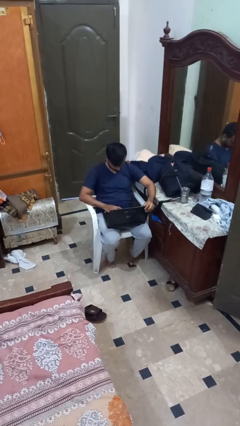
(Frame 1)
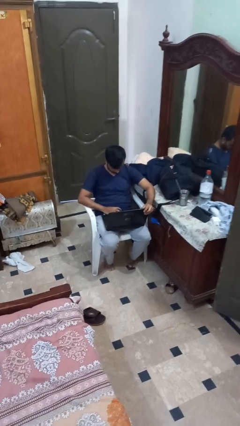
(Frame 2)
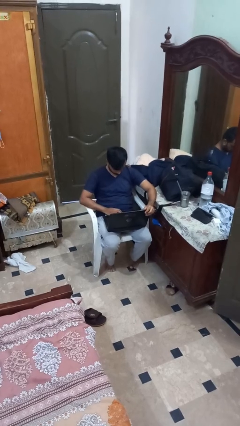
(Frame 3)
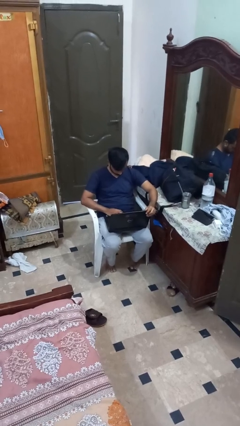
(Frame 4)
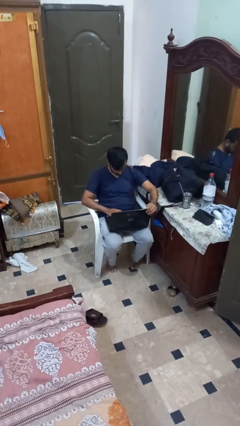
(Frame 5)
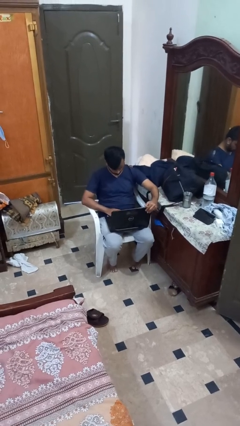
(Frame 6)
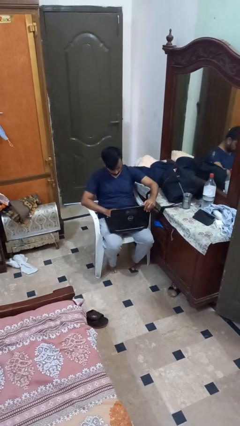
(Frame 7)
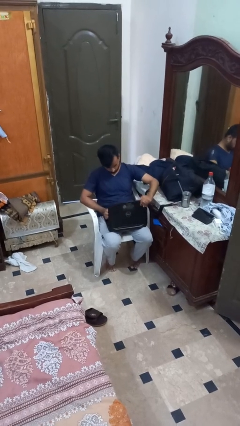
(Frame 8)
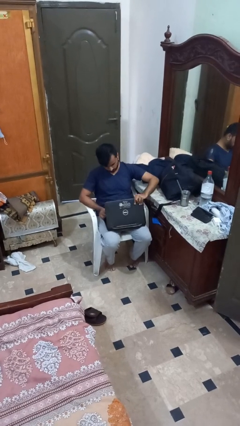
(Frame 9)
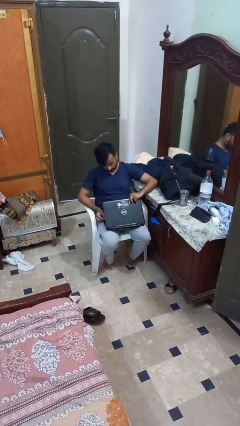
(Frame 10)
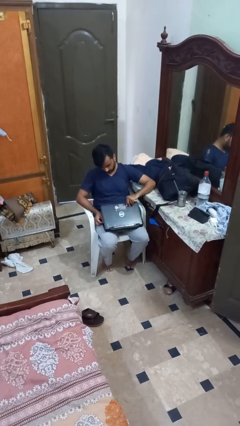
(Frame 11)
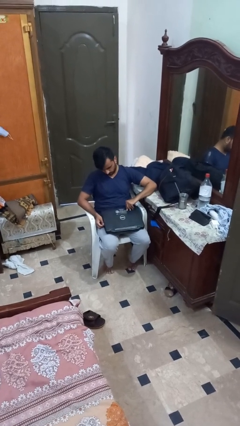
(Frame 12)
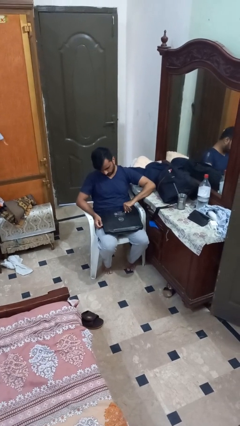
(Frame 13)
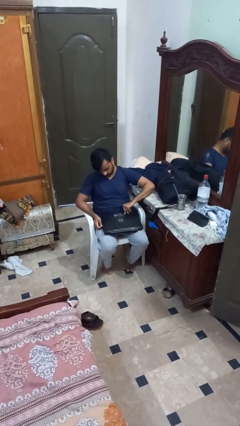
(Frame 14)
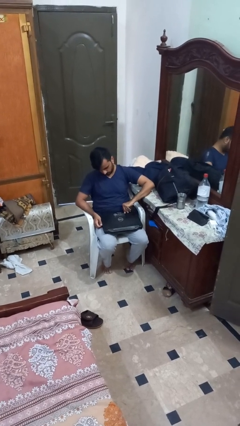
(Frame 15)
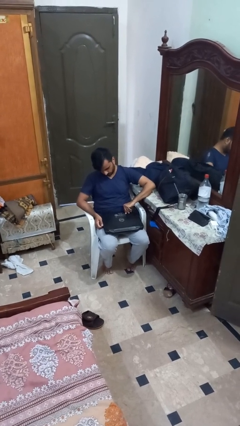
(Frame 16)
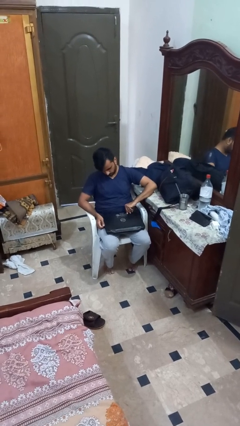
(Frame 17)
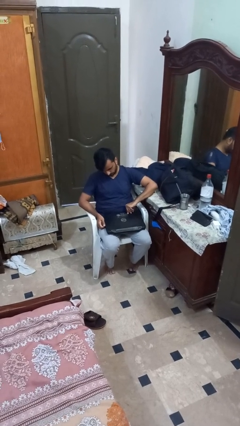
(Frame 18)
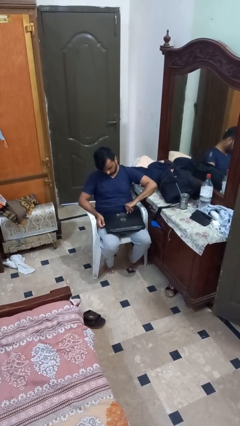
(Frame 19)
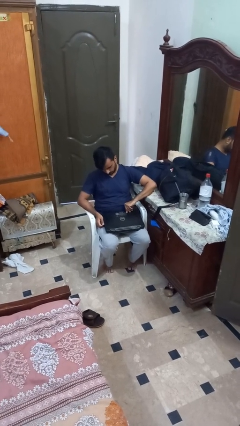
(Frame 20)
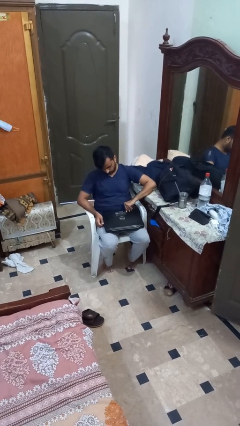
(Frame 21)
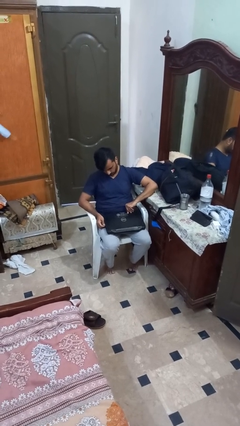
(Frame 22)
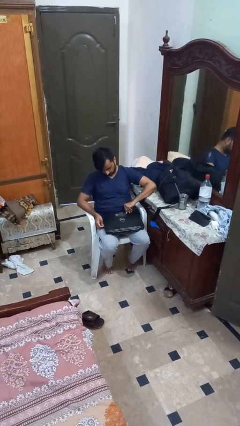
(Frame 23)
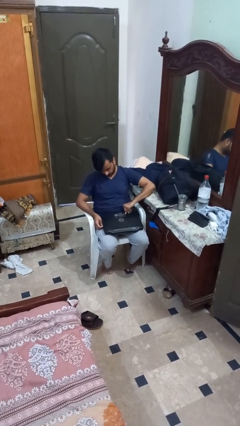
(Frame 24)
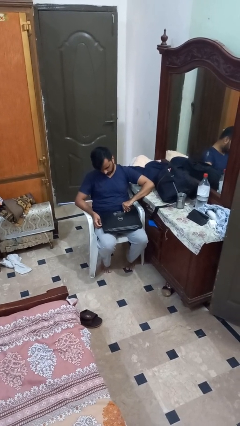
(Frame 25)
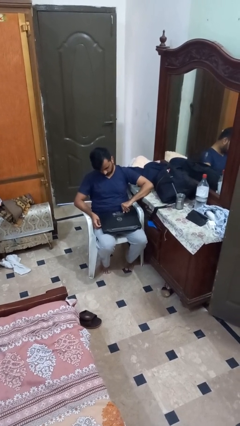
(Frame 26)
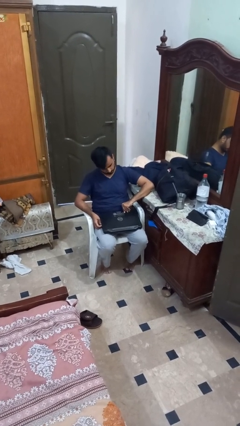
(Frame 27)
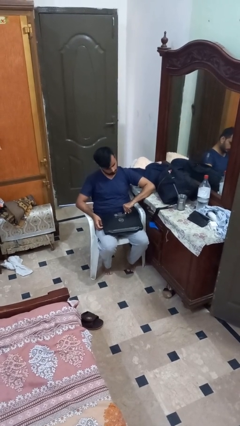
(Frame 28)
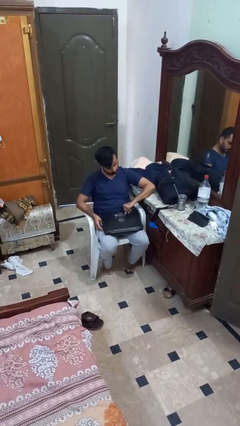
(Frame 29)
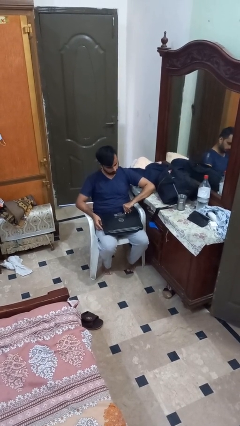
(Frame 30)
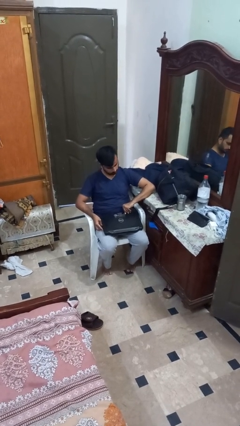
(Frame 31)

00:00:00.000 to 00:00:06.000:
person closes laptop

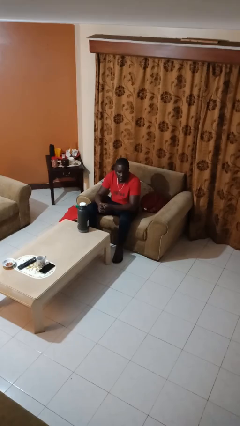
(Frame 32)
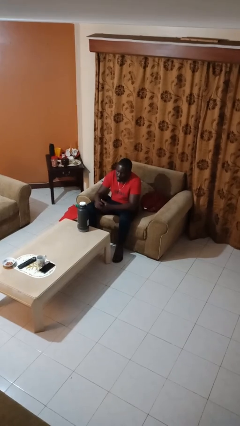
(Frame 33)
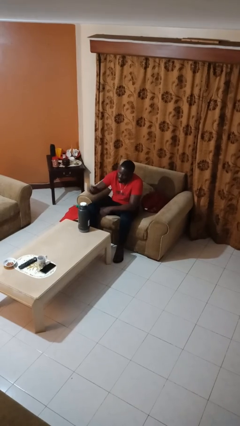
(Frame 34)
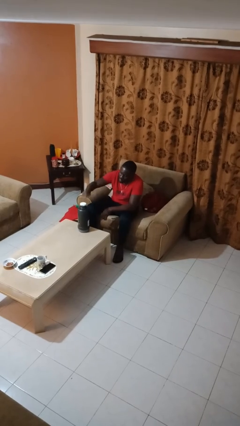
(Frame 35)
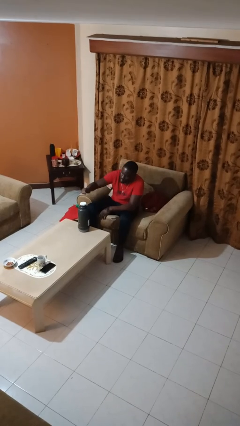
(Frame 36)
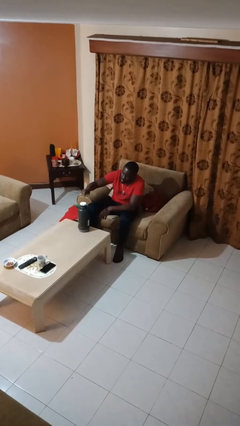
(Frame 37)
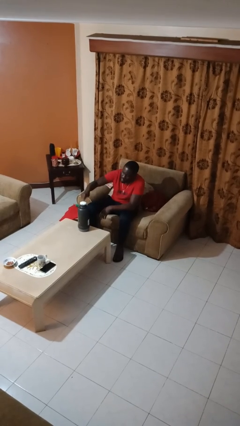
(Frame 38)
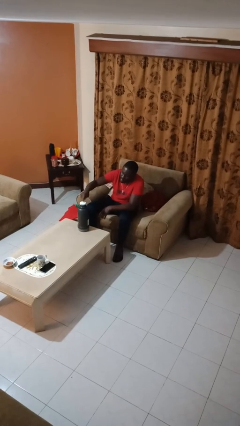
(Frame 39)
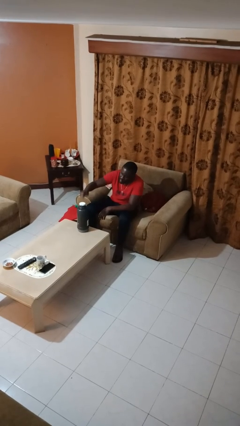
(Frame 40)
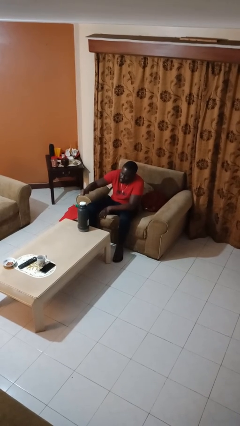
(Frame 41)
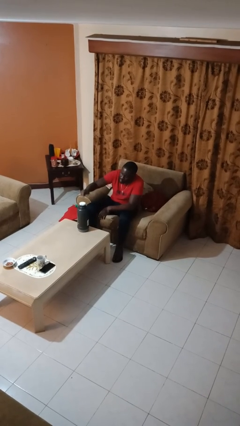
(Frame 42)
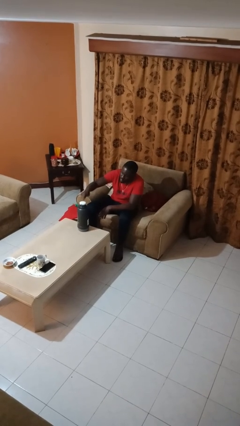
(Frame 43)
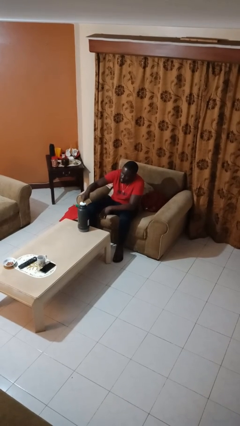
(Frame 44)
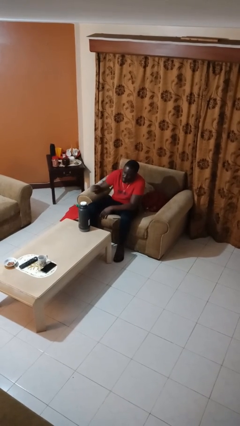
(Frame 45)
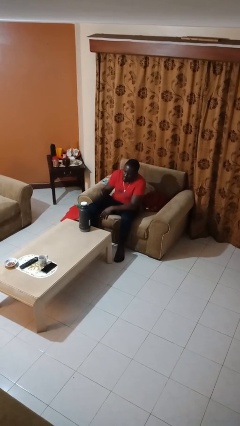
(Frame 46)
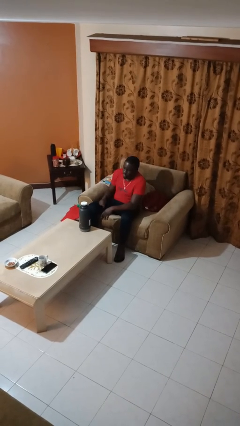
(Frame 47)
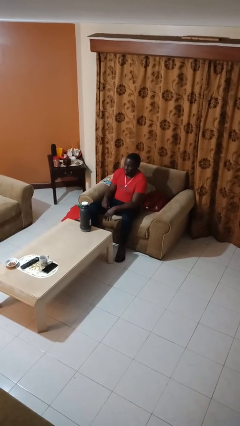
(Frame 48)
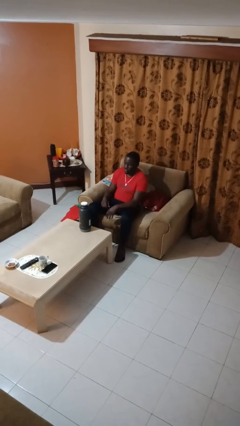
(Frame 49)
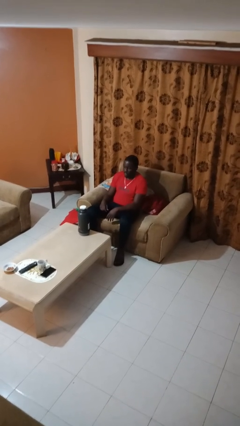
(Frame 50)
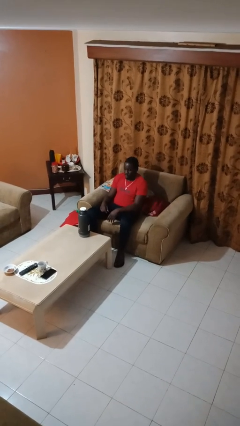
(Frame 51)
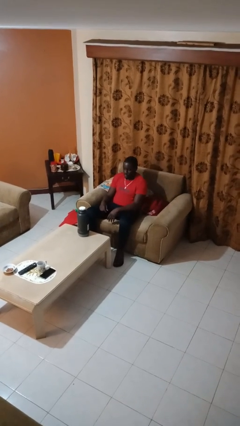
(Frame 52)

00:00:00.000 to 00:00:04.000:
person taps object with finger

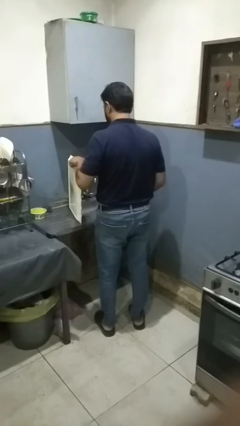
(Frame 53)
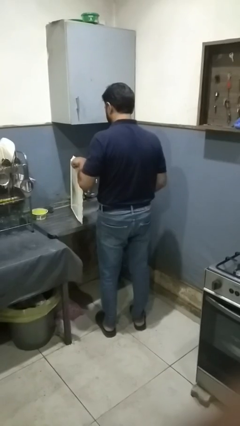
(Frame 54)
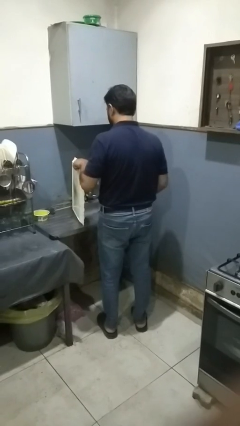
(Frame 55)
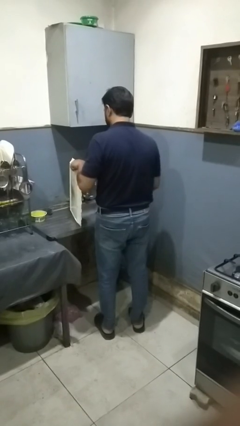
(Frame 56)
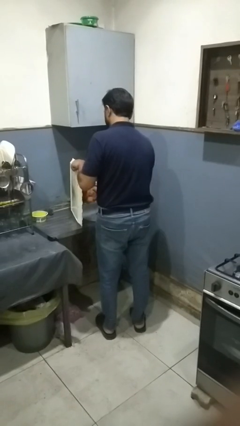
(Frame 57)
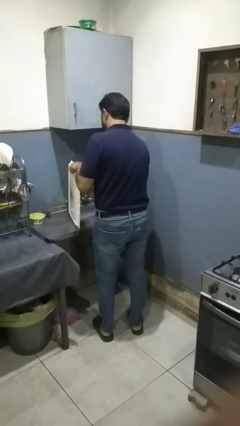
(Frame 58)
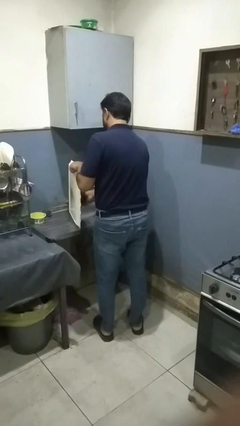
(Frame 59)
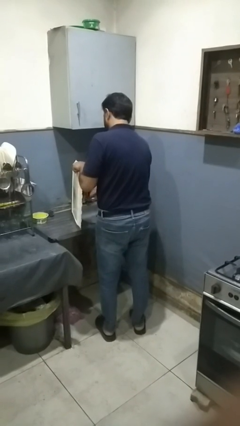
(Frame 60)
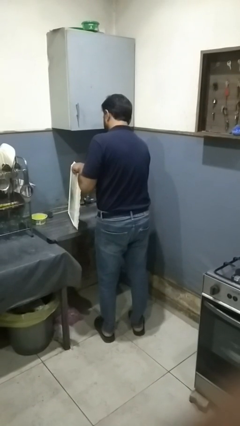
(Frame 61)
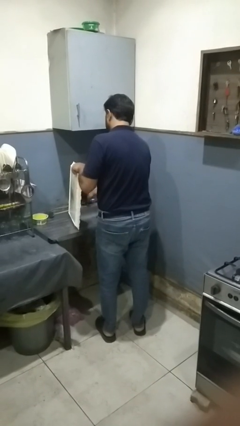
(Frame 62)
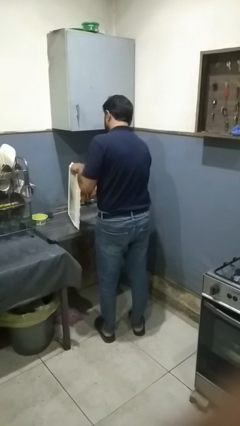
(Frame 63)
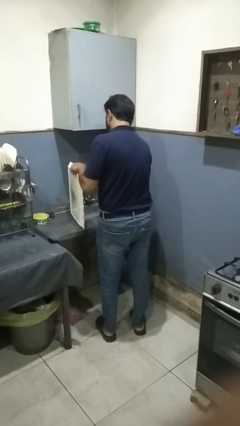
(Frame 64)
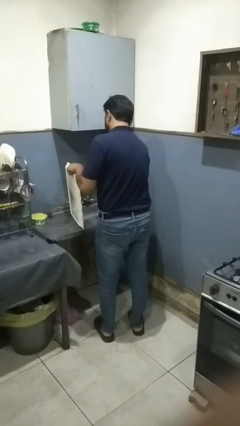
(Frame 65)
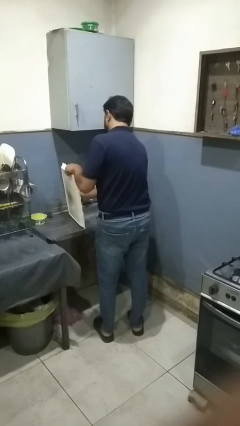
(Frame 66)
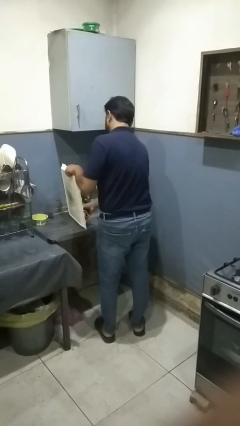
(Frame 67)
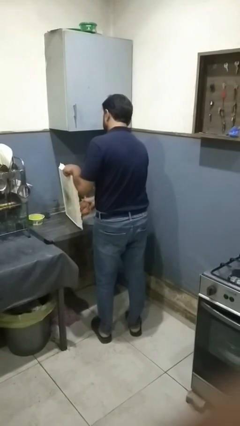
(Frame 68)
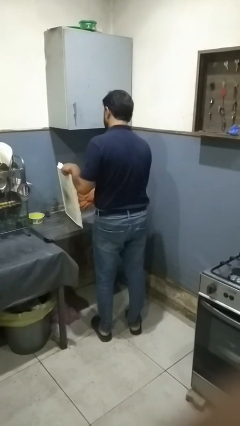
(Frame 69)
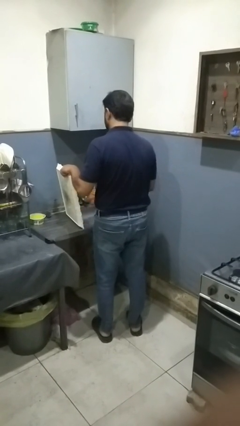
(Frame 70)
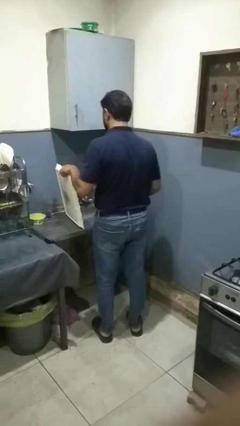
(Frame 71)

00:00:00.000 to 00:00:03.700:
person dries dish

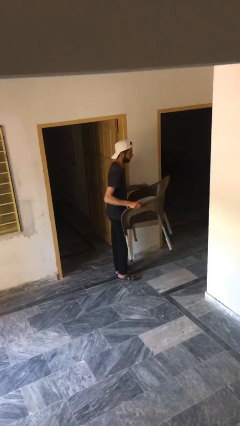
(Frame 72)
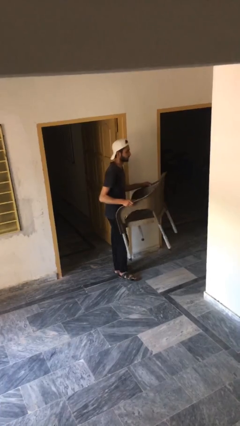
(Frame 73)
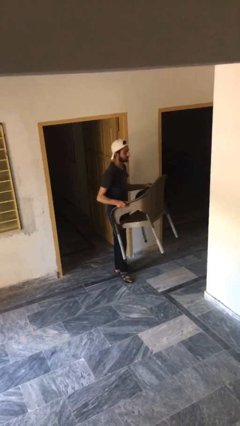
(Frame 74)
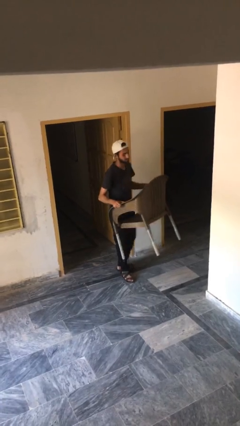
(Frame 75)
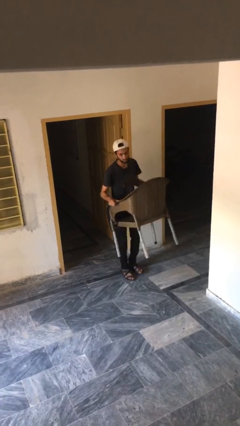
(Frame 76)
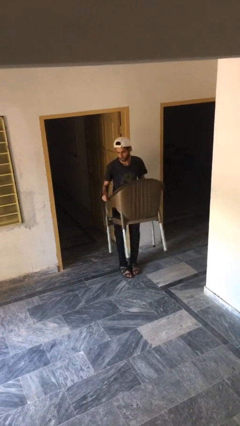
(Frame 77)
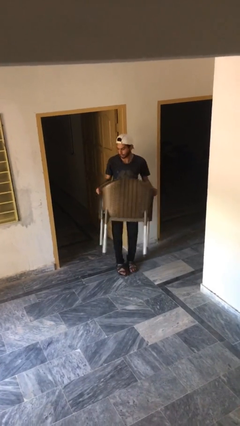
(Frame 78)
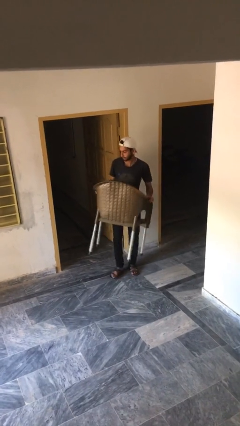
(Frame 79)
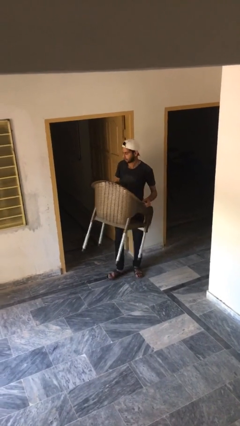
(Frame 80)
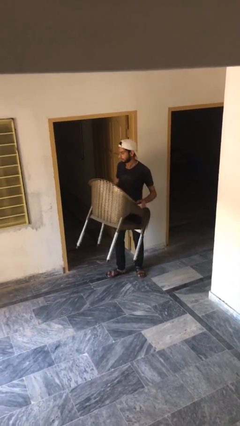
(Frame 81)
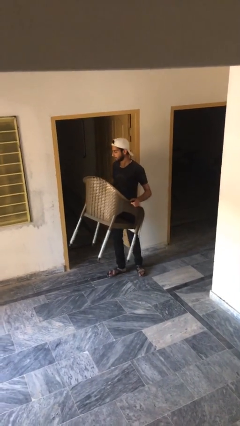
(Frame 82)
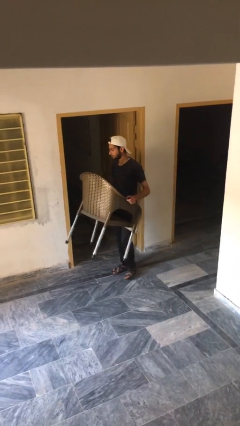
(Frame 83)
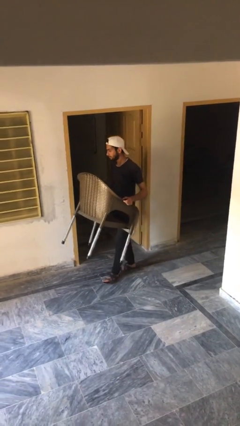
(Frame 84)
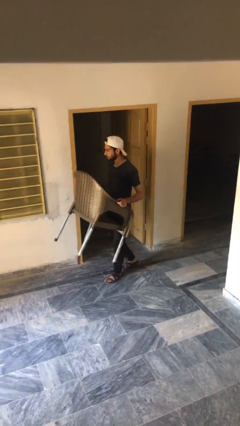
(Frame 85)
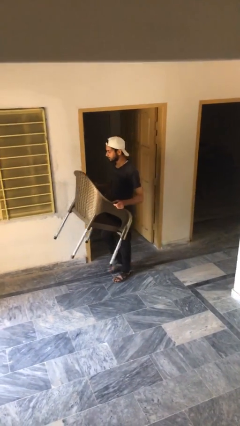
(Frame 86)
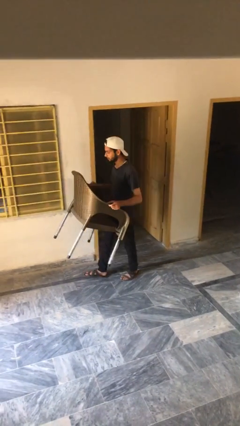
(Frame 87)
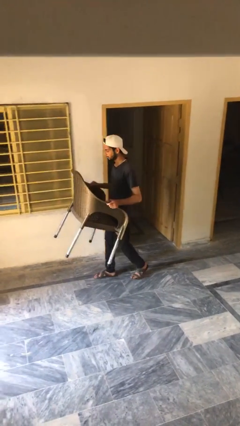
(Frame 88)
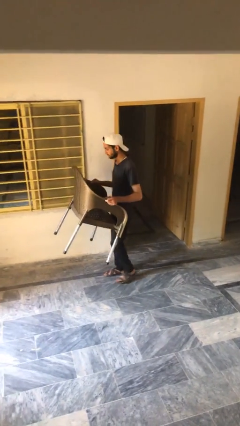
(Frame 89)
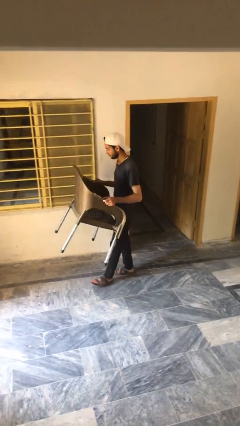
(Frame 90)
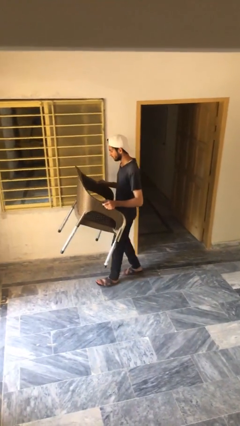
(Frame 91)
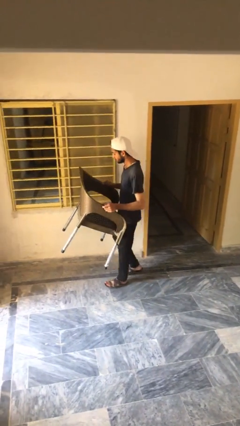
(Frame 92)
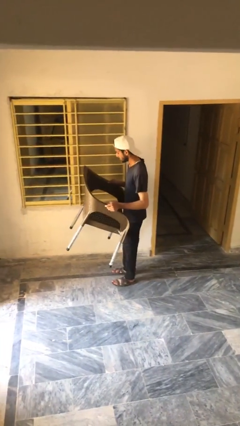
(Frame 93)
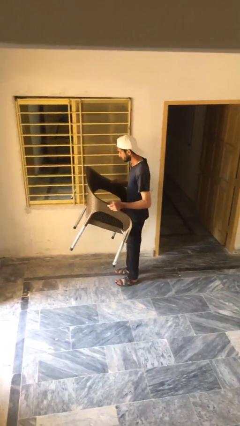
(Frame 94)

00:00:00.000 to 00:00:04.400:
person carries heavy object
